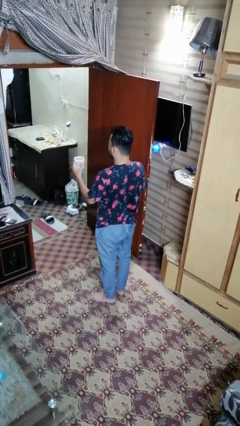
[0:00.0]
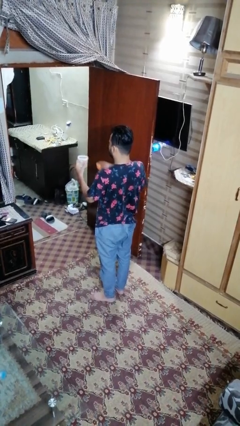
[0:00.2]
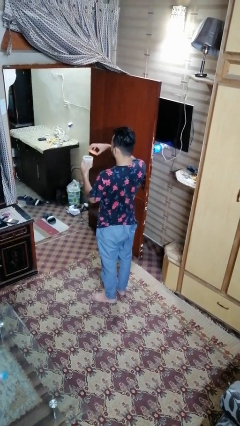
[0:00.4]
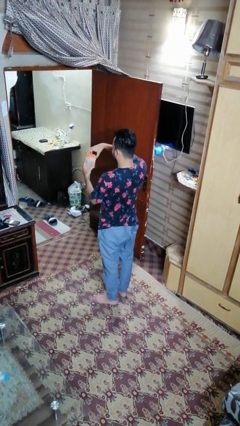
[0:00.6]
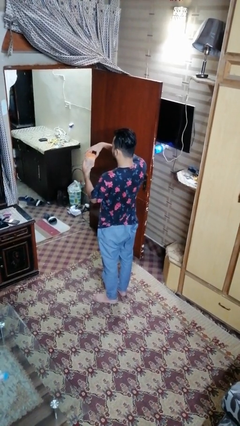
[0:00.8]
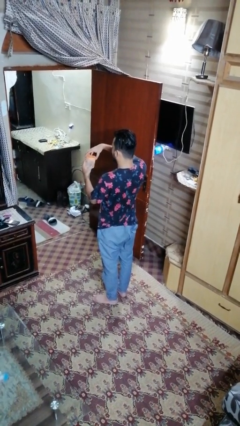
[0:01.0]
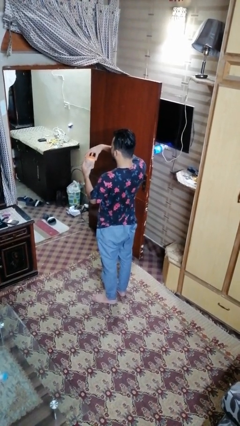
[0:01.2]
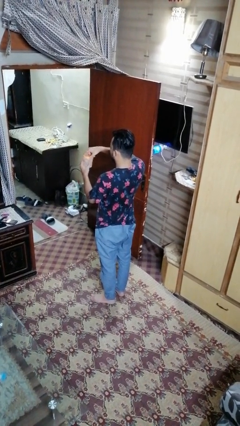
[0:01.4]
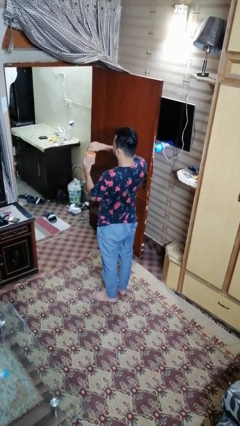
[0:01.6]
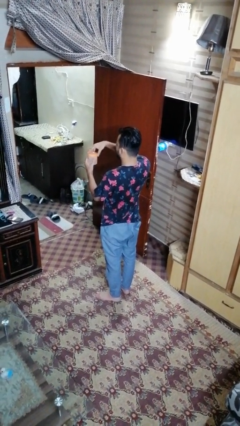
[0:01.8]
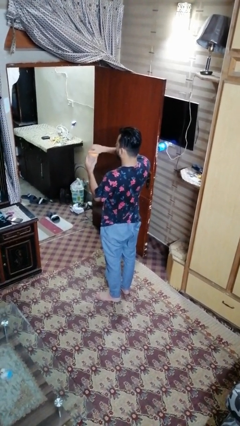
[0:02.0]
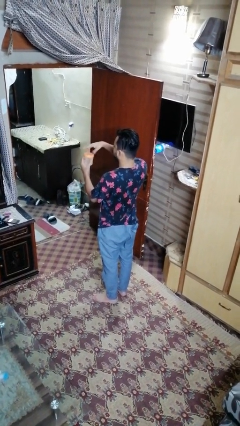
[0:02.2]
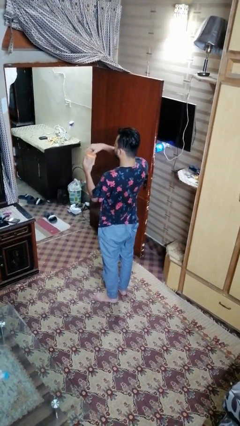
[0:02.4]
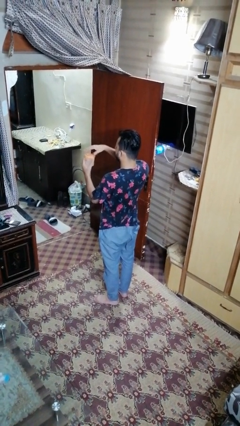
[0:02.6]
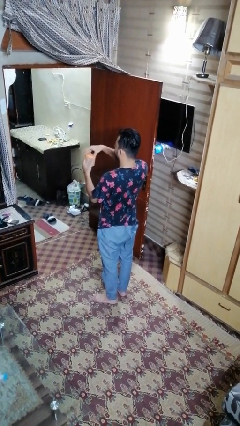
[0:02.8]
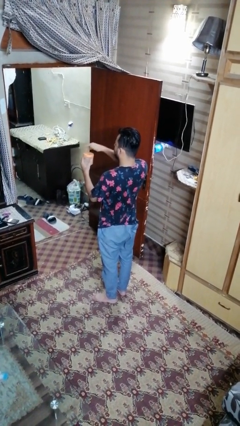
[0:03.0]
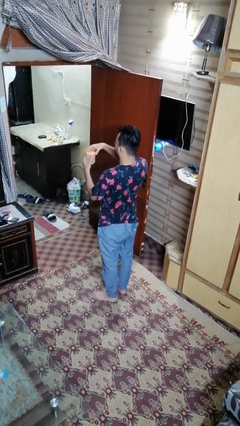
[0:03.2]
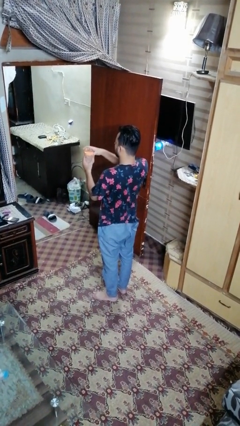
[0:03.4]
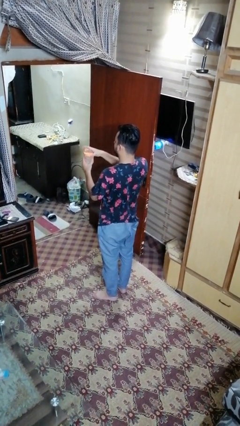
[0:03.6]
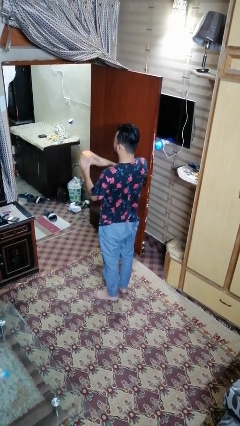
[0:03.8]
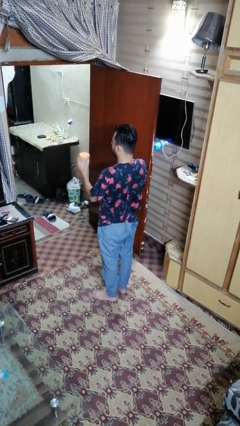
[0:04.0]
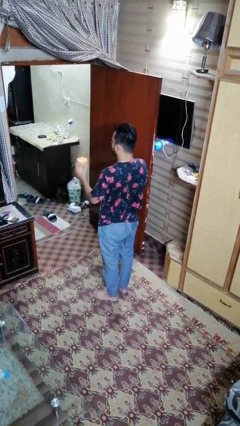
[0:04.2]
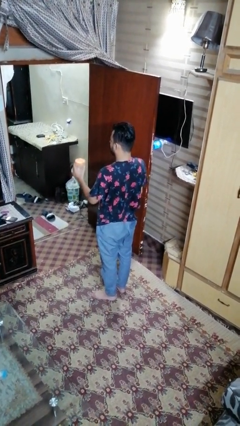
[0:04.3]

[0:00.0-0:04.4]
person closes jar

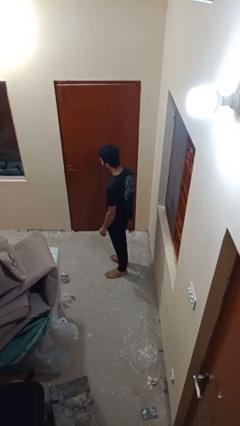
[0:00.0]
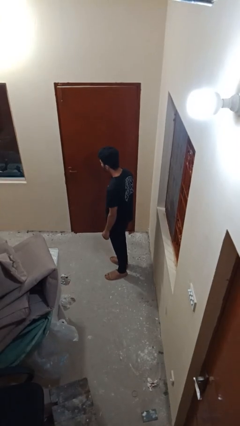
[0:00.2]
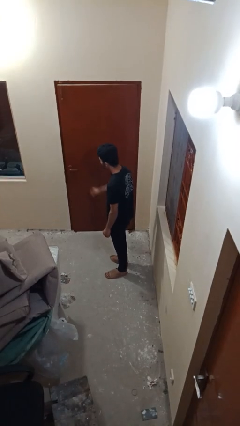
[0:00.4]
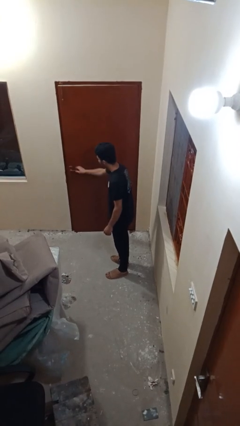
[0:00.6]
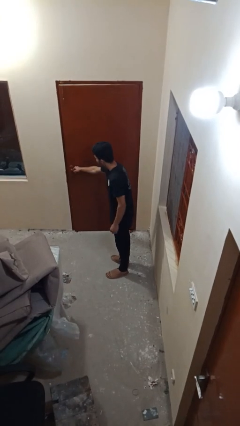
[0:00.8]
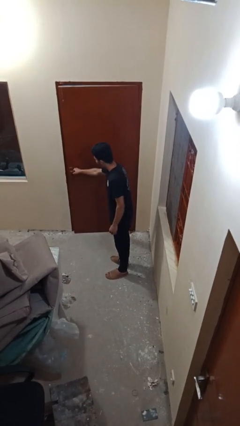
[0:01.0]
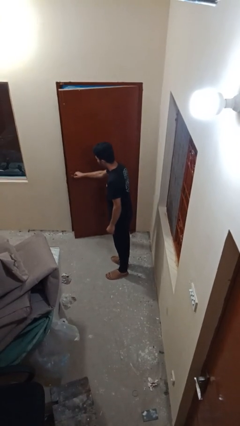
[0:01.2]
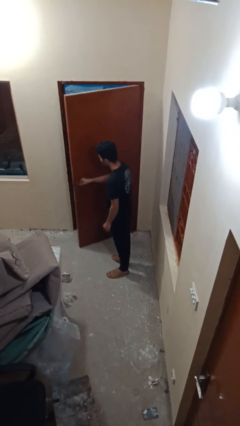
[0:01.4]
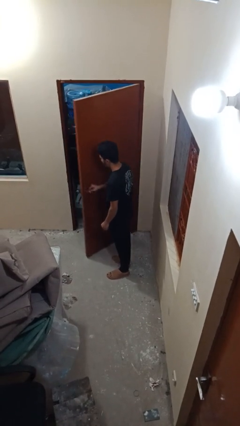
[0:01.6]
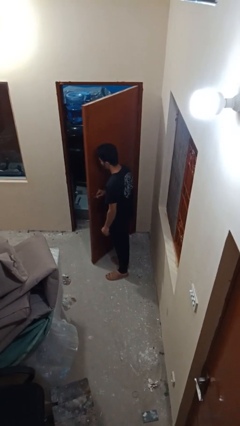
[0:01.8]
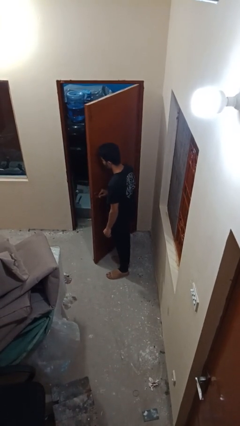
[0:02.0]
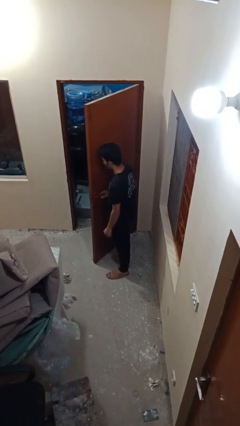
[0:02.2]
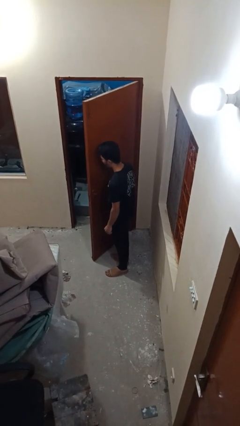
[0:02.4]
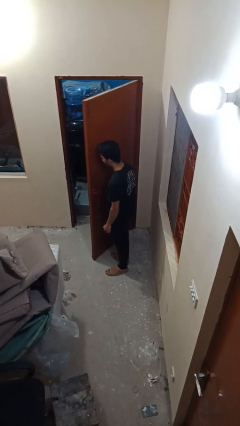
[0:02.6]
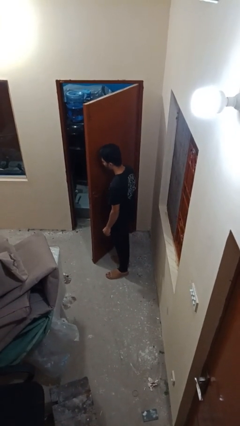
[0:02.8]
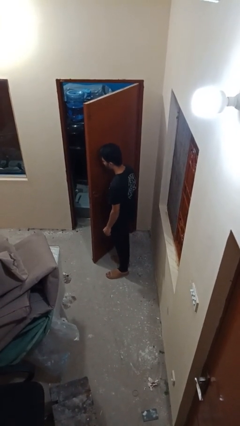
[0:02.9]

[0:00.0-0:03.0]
person opens facility door

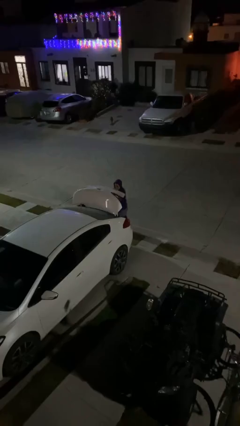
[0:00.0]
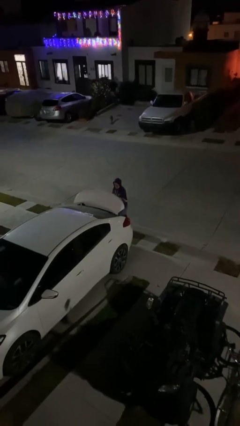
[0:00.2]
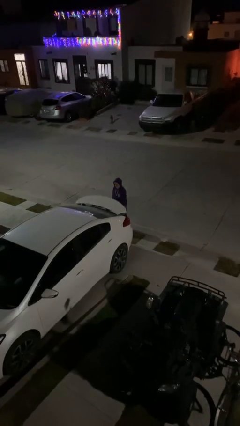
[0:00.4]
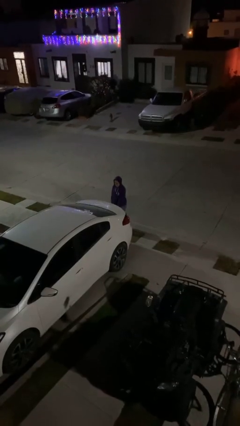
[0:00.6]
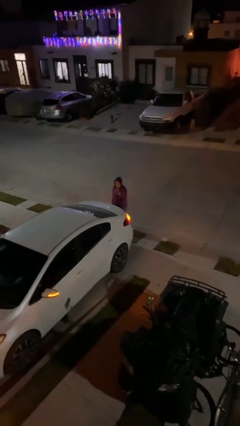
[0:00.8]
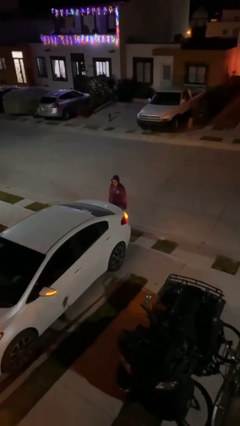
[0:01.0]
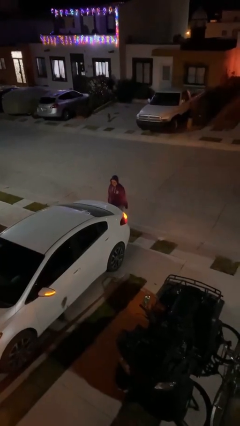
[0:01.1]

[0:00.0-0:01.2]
person closes car trunk

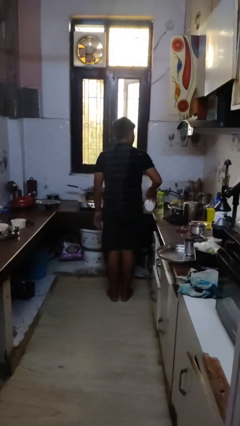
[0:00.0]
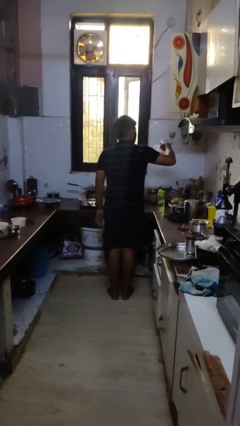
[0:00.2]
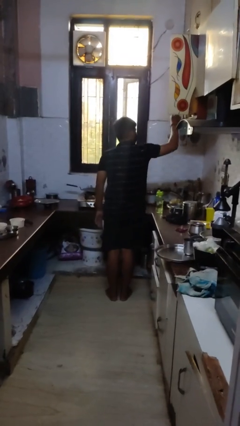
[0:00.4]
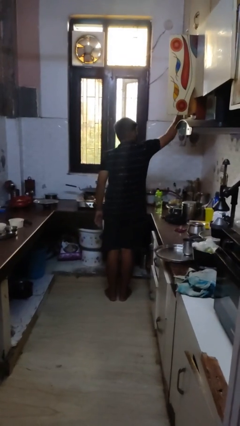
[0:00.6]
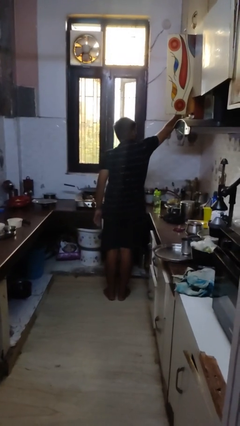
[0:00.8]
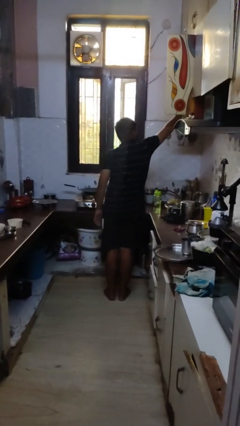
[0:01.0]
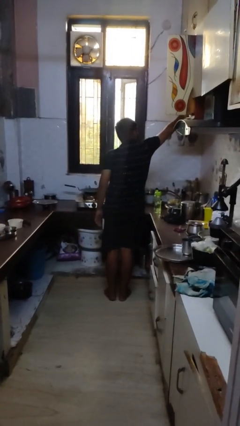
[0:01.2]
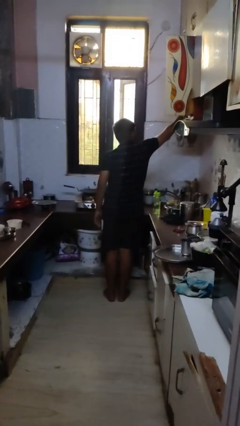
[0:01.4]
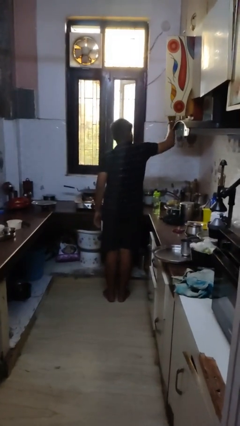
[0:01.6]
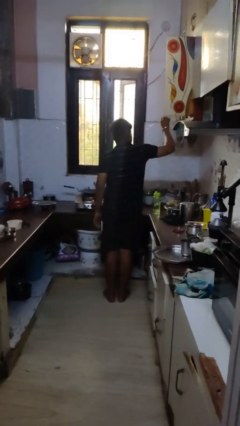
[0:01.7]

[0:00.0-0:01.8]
person puts object in cabinet

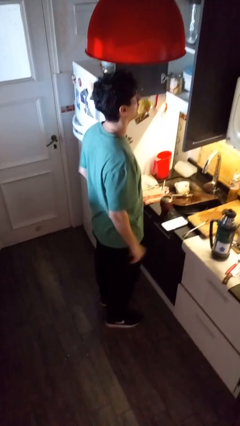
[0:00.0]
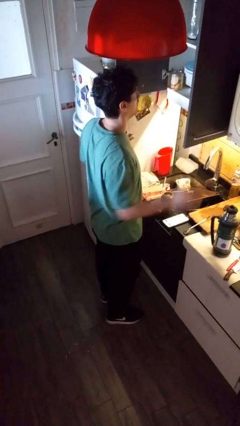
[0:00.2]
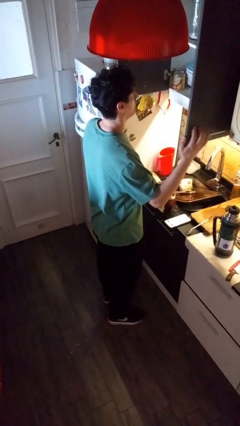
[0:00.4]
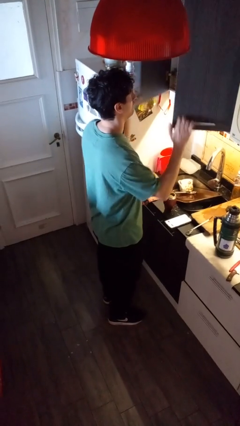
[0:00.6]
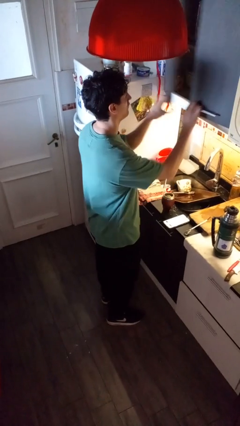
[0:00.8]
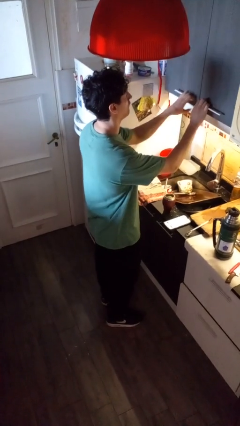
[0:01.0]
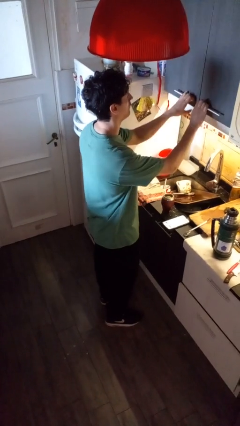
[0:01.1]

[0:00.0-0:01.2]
person closes kitchen drawer

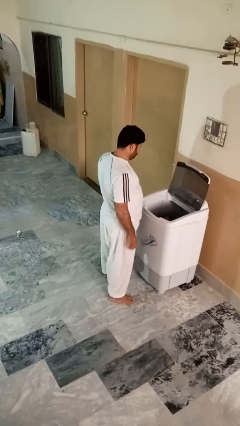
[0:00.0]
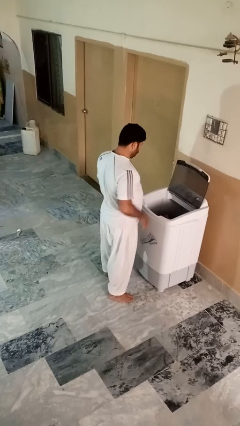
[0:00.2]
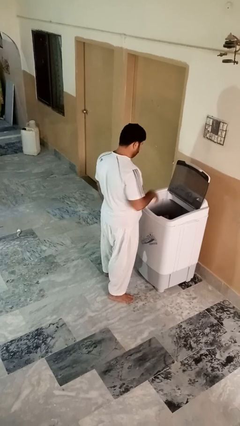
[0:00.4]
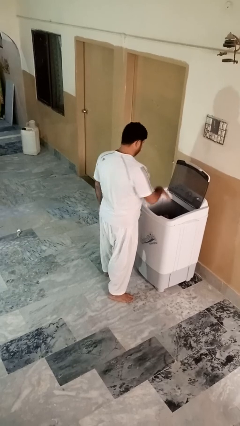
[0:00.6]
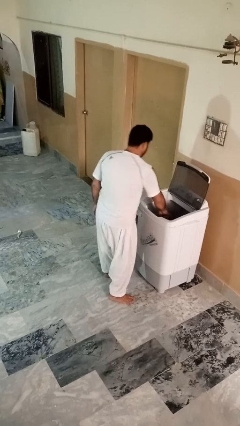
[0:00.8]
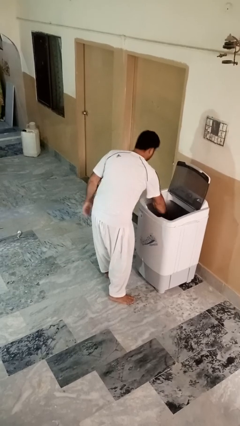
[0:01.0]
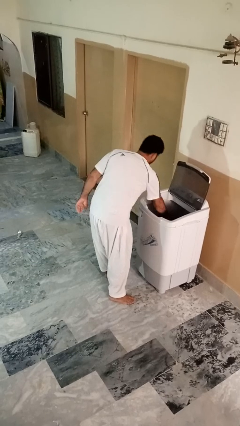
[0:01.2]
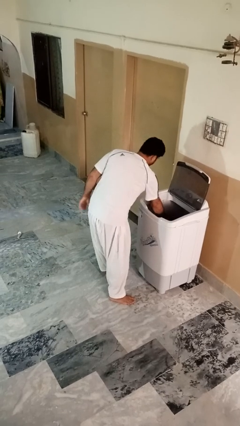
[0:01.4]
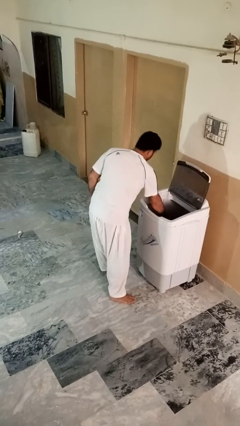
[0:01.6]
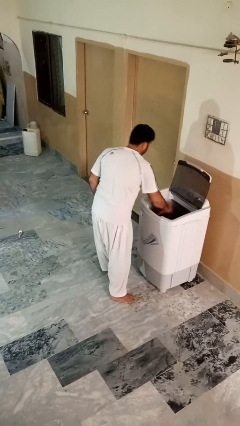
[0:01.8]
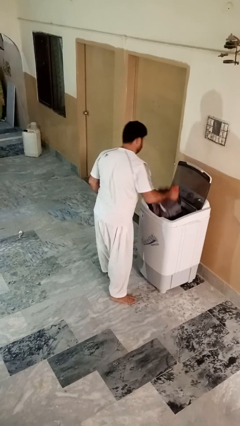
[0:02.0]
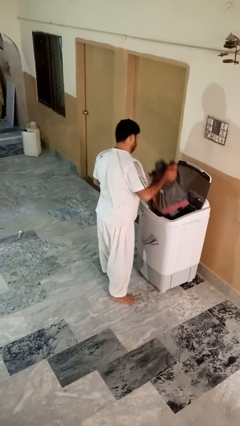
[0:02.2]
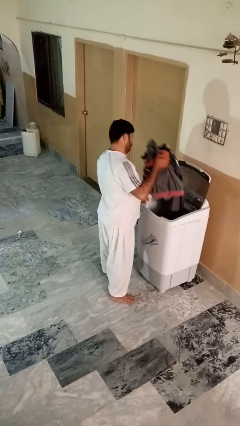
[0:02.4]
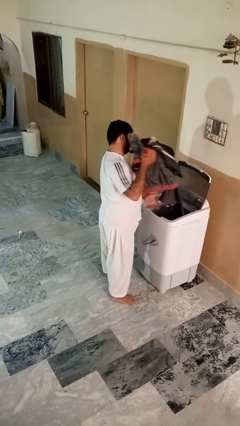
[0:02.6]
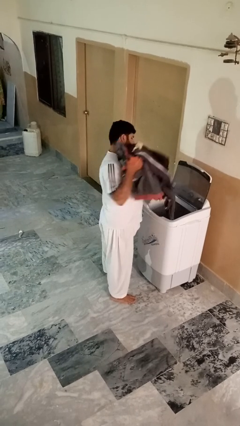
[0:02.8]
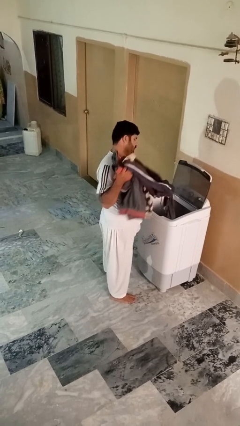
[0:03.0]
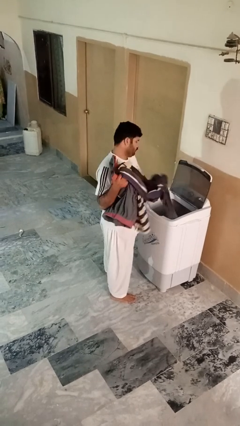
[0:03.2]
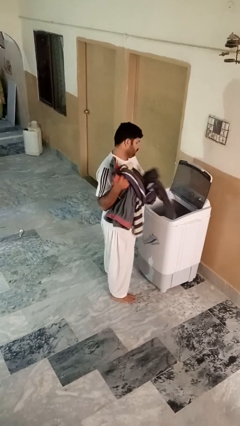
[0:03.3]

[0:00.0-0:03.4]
person unloads clotheswasher

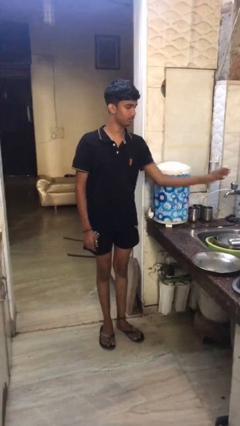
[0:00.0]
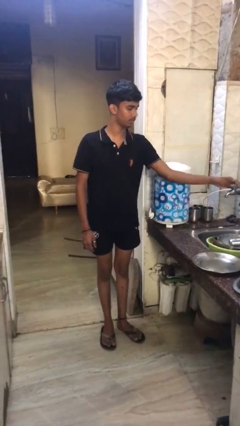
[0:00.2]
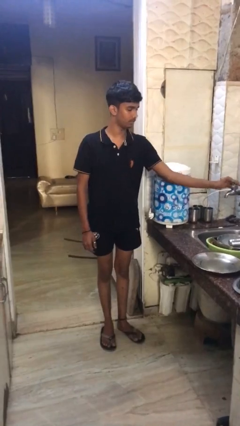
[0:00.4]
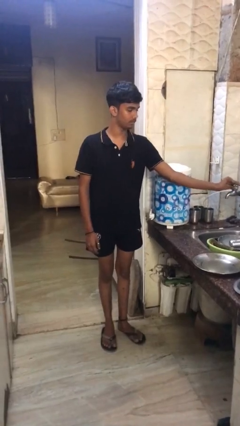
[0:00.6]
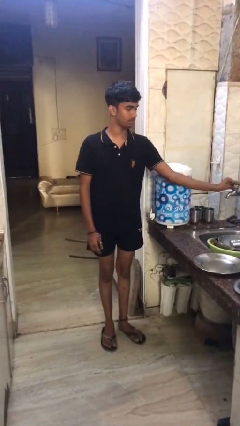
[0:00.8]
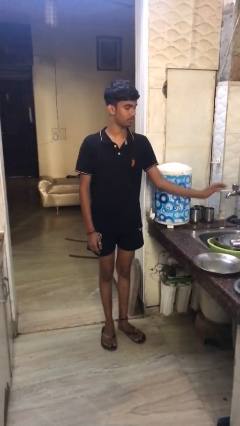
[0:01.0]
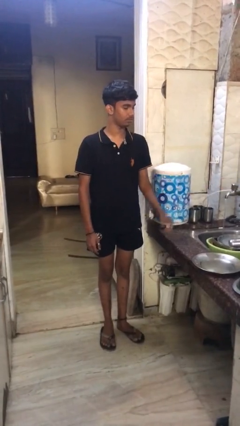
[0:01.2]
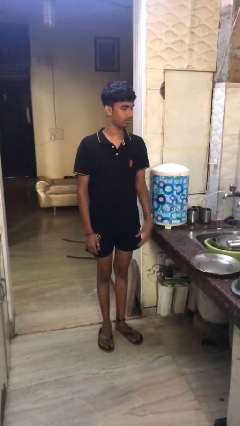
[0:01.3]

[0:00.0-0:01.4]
person turns on faucet

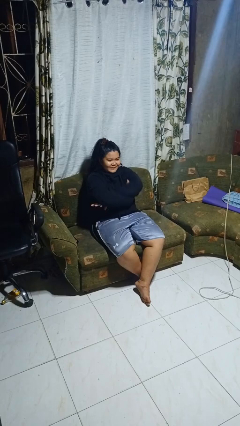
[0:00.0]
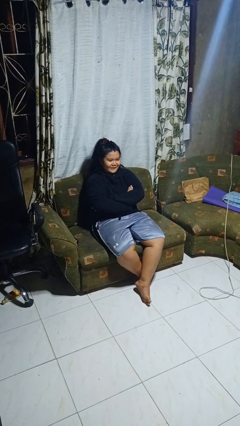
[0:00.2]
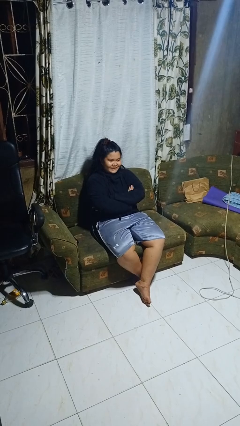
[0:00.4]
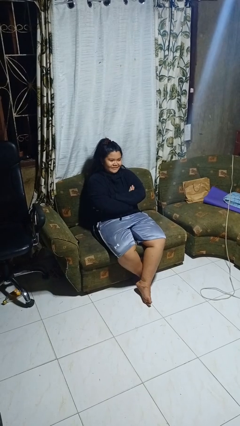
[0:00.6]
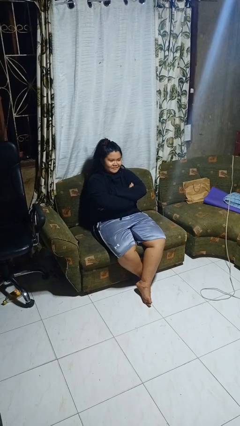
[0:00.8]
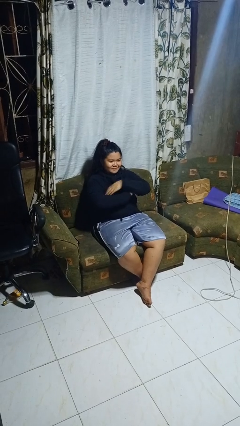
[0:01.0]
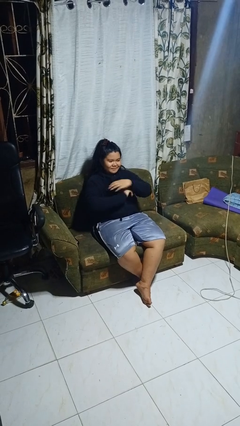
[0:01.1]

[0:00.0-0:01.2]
person crosses arms
